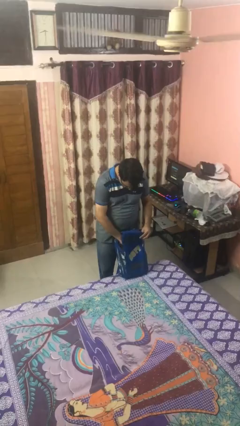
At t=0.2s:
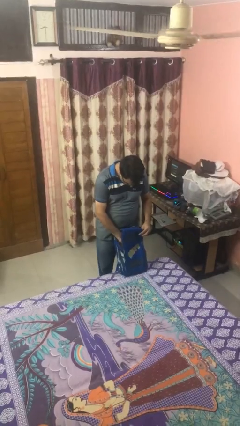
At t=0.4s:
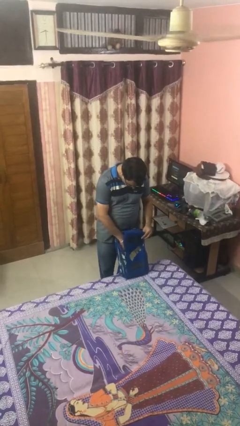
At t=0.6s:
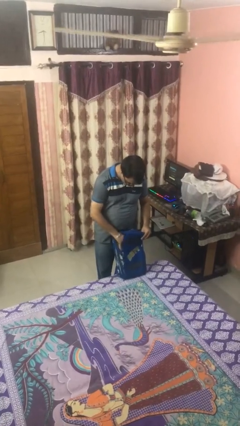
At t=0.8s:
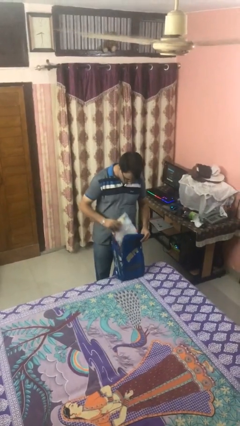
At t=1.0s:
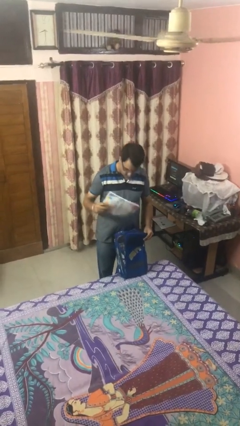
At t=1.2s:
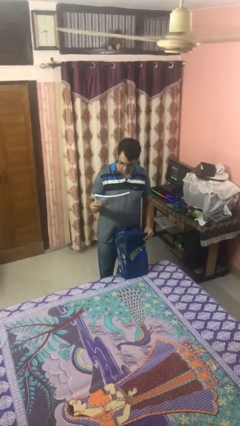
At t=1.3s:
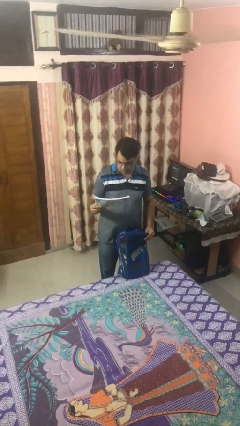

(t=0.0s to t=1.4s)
person takes object from backpack

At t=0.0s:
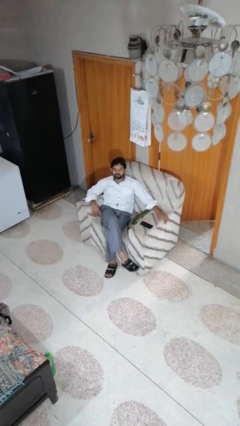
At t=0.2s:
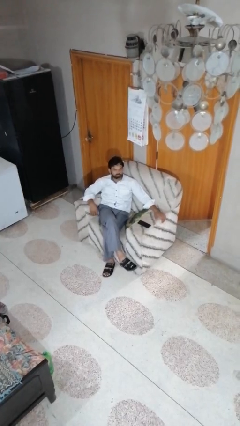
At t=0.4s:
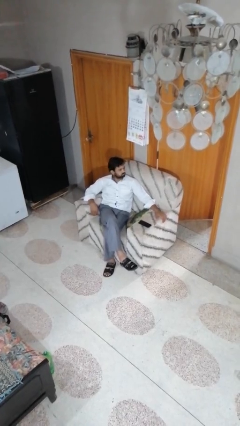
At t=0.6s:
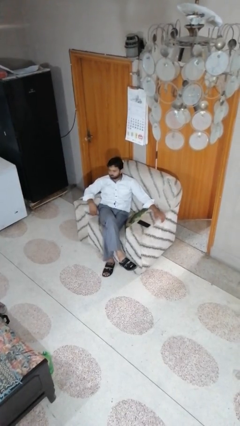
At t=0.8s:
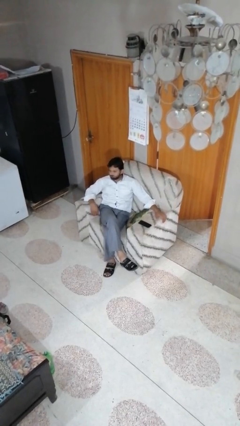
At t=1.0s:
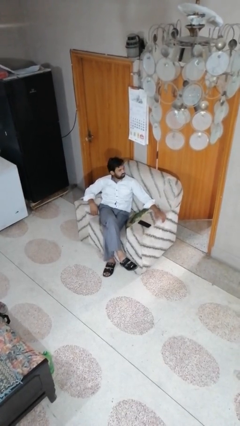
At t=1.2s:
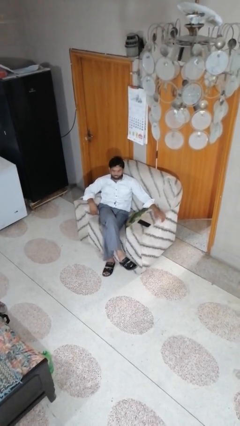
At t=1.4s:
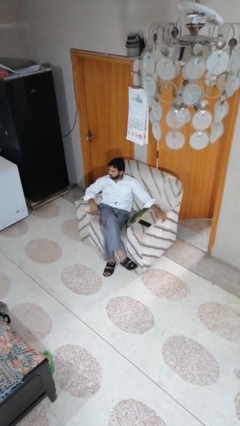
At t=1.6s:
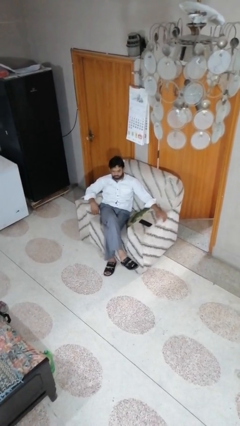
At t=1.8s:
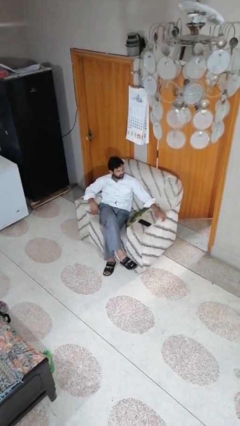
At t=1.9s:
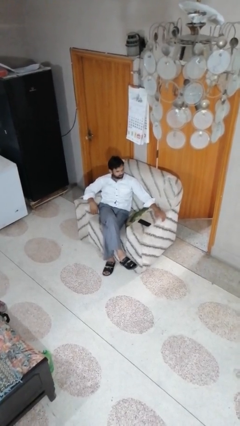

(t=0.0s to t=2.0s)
person shakes head

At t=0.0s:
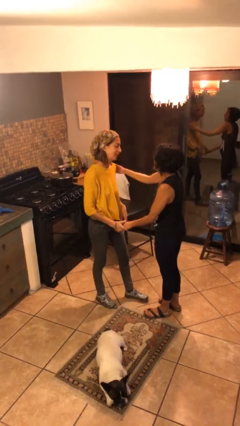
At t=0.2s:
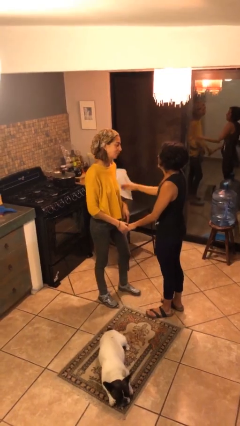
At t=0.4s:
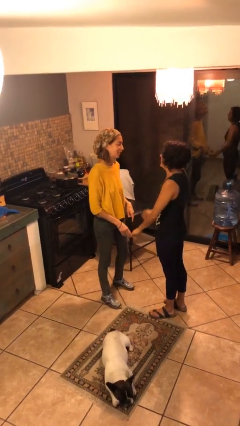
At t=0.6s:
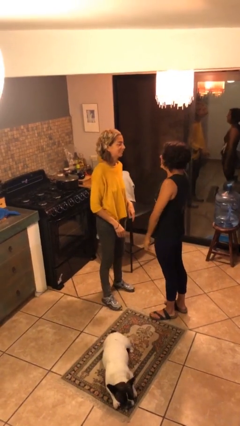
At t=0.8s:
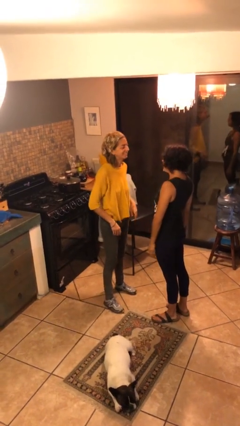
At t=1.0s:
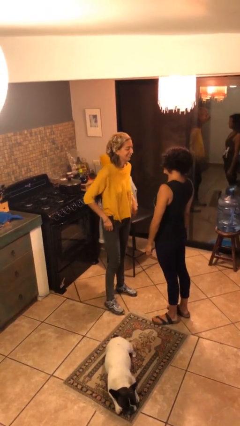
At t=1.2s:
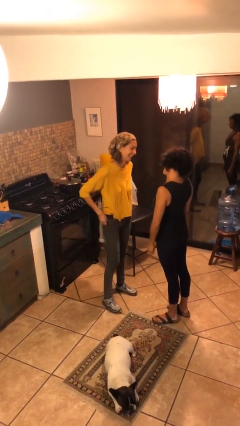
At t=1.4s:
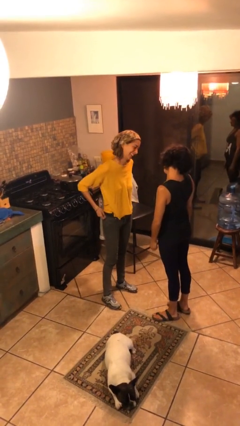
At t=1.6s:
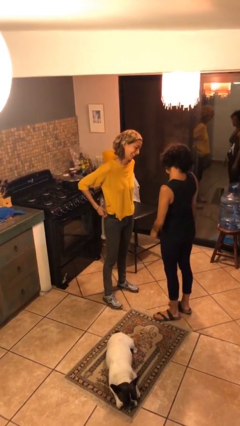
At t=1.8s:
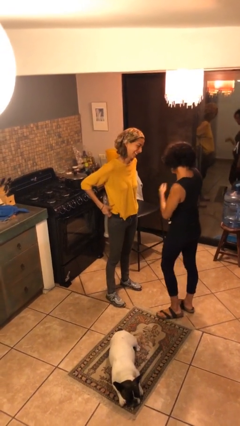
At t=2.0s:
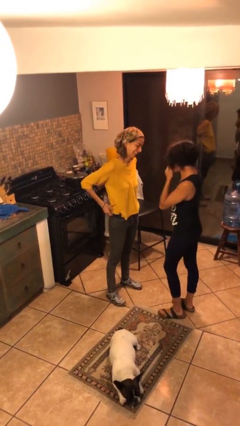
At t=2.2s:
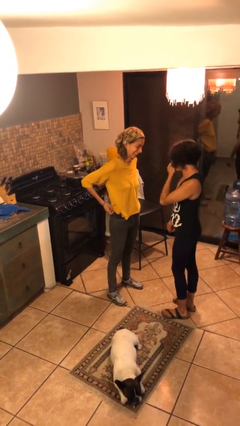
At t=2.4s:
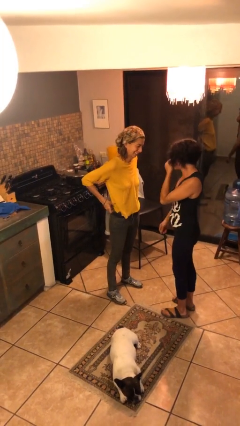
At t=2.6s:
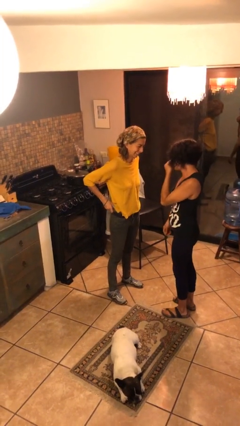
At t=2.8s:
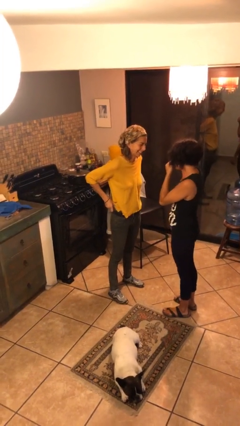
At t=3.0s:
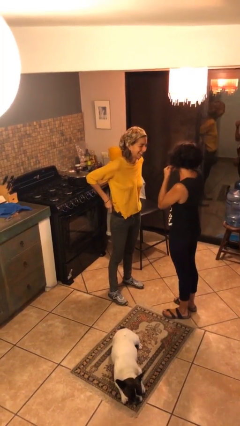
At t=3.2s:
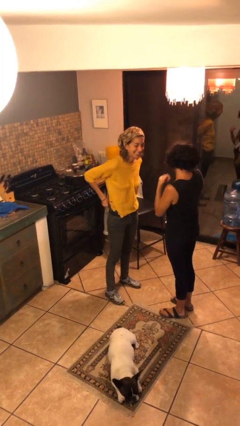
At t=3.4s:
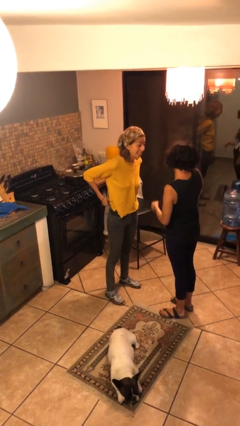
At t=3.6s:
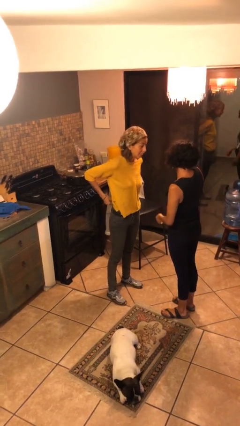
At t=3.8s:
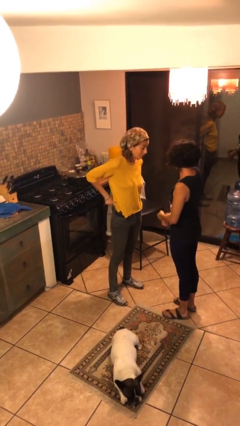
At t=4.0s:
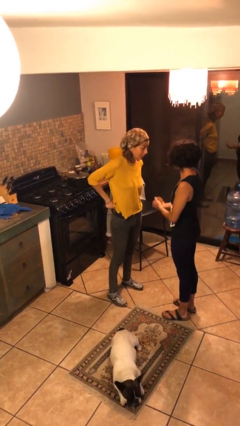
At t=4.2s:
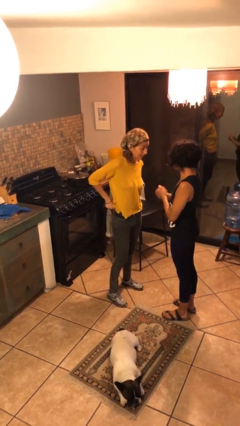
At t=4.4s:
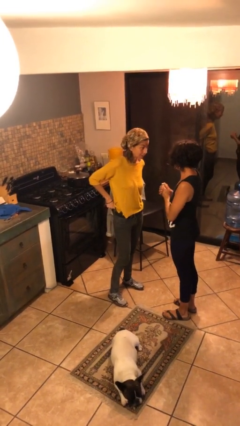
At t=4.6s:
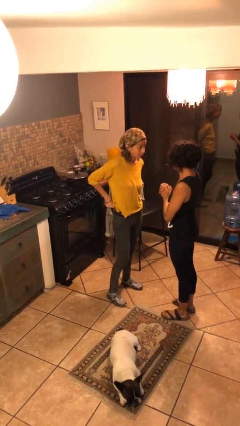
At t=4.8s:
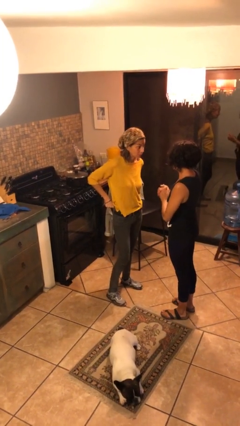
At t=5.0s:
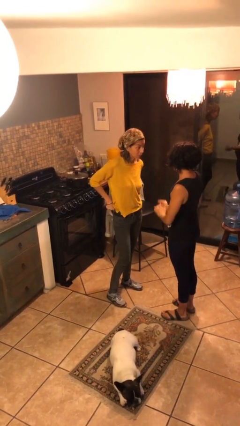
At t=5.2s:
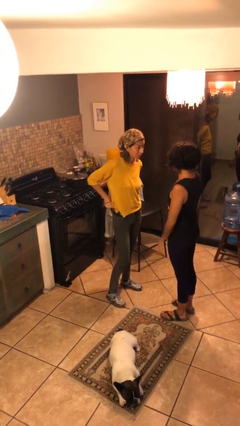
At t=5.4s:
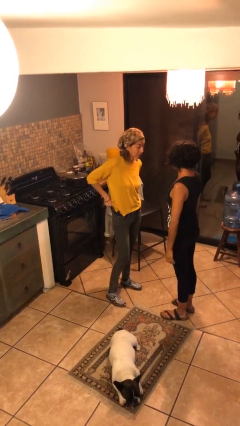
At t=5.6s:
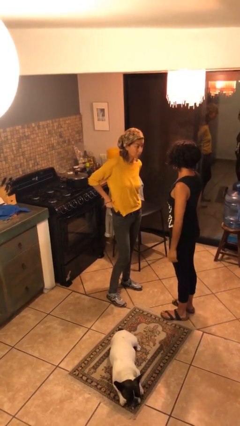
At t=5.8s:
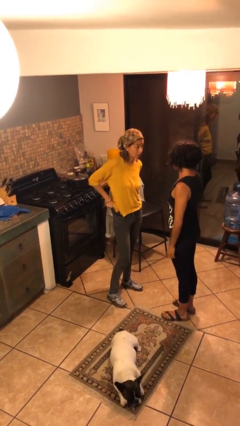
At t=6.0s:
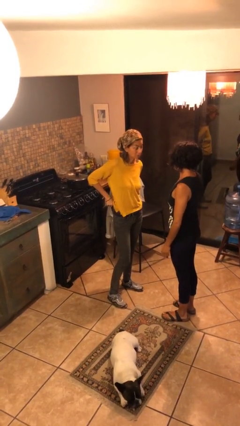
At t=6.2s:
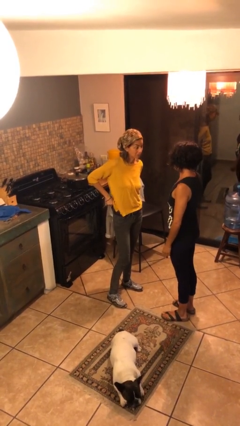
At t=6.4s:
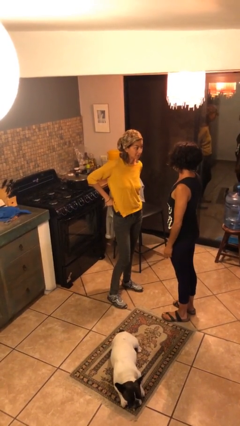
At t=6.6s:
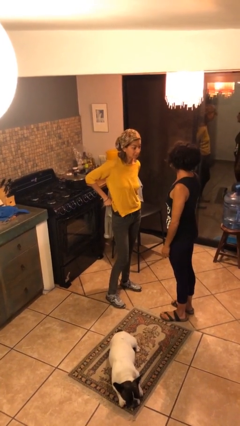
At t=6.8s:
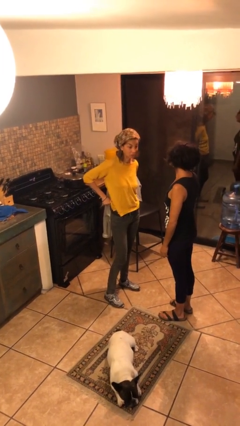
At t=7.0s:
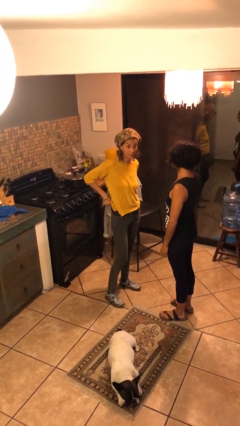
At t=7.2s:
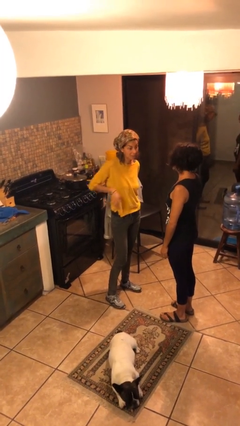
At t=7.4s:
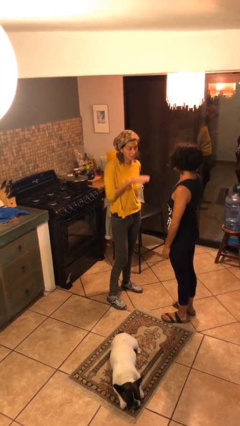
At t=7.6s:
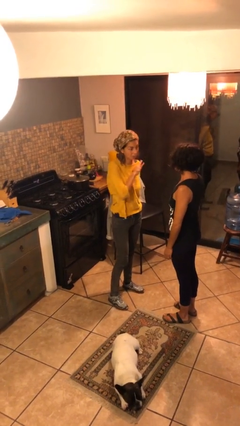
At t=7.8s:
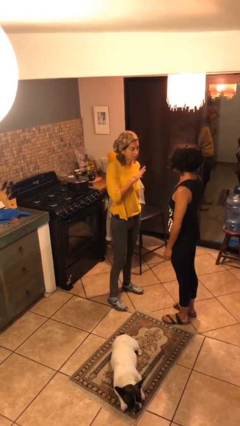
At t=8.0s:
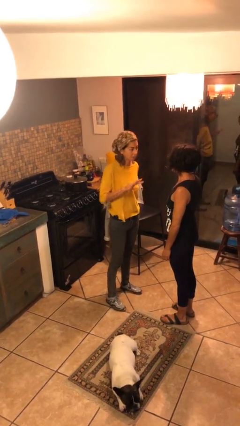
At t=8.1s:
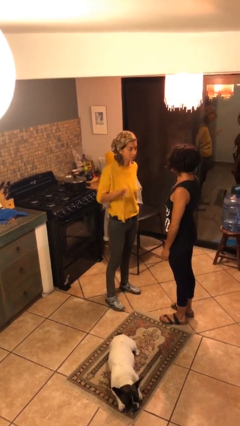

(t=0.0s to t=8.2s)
person talks to person

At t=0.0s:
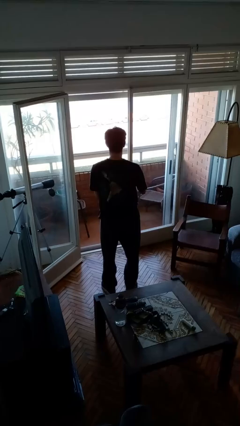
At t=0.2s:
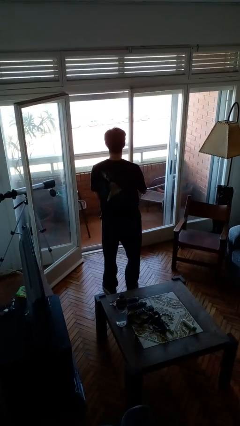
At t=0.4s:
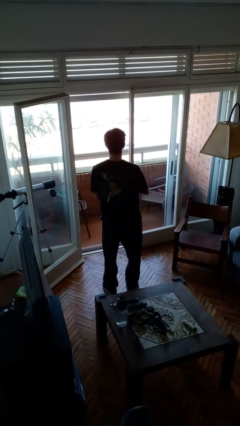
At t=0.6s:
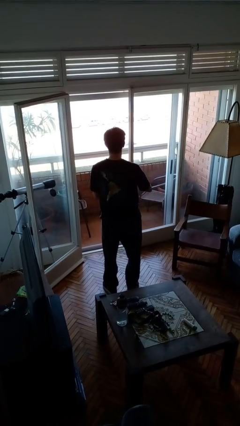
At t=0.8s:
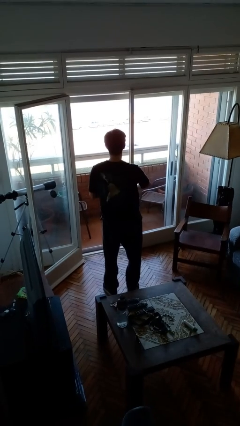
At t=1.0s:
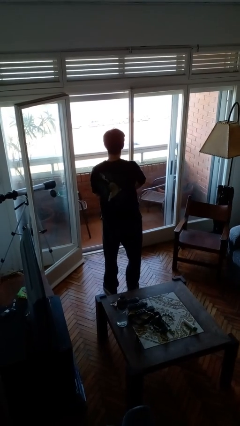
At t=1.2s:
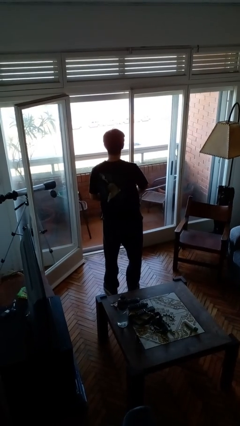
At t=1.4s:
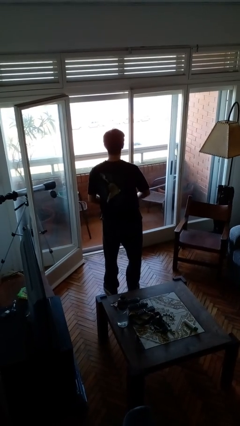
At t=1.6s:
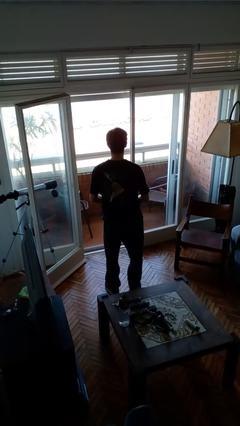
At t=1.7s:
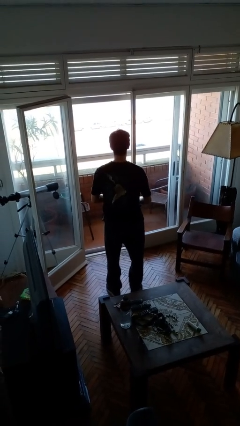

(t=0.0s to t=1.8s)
person takes off wristwatch

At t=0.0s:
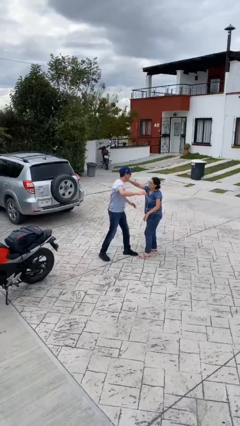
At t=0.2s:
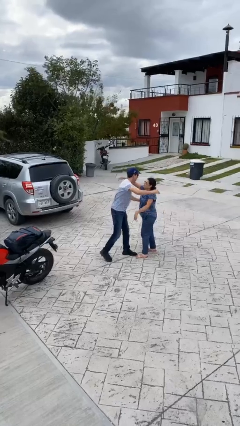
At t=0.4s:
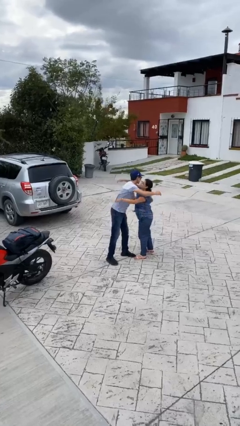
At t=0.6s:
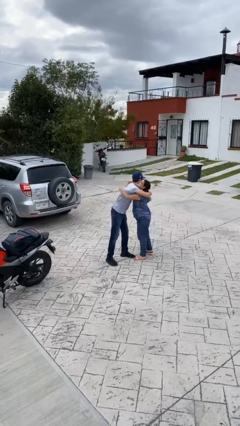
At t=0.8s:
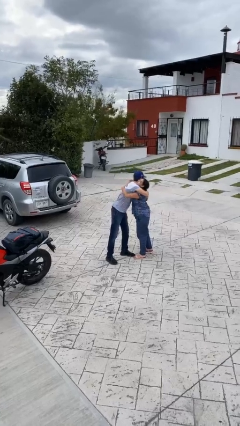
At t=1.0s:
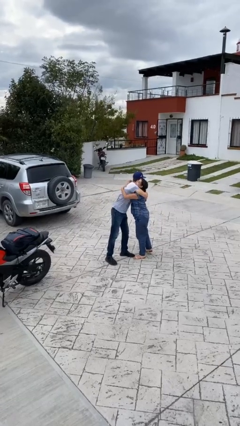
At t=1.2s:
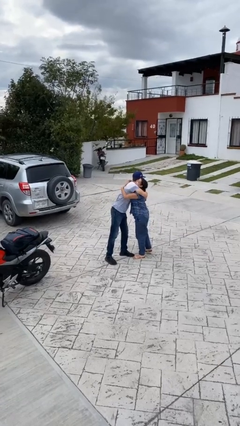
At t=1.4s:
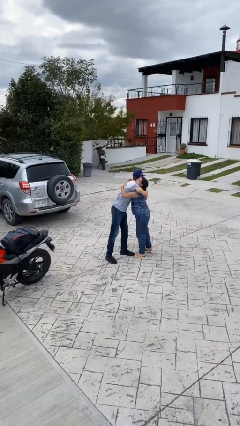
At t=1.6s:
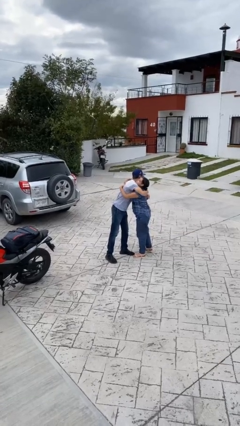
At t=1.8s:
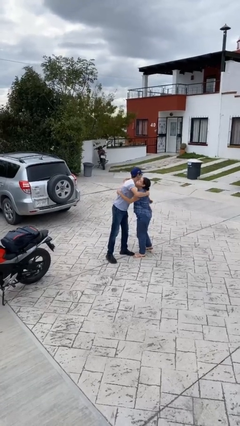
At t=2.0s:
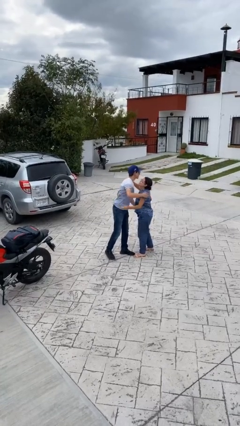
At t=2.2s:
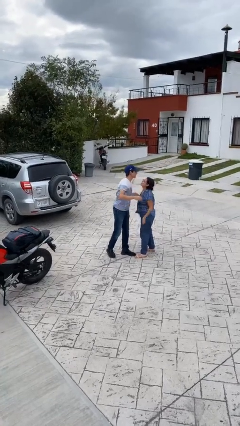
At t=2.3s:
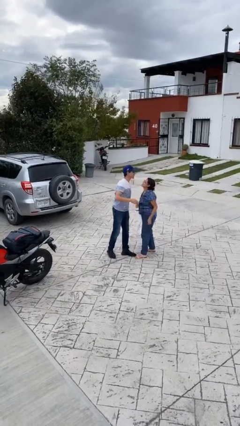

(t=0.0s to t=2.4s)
person embraces person

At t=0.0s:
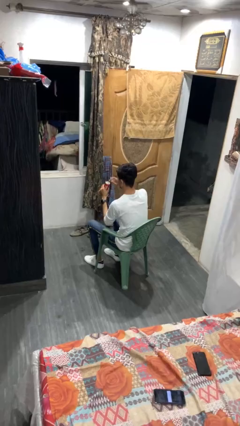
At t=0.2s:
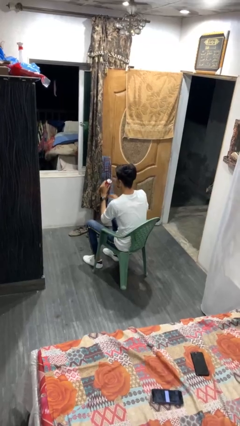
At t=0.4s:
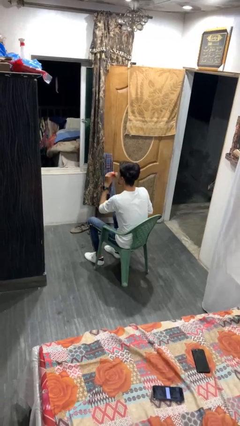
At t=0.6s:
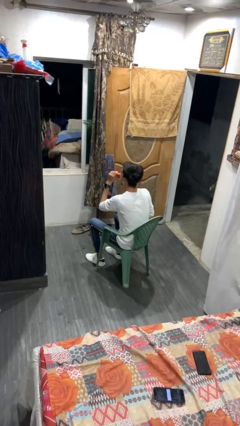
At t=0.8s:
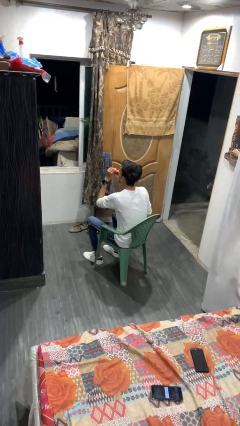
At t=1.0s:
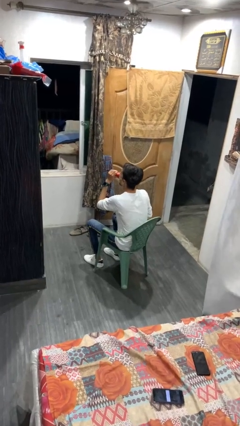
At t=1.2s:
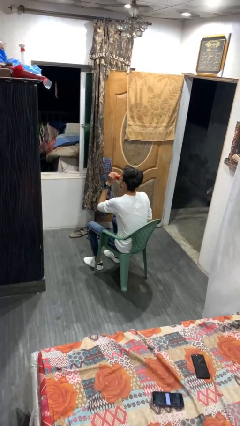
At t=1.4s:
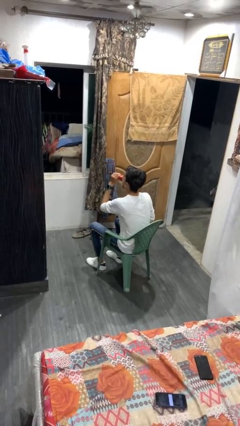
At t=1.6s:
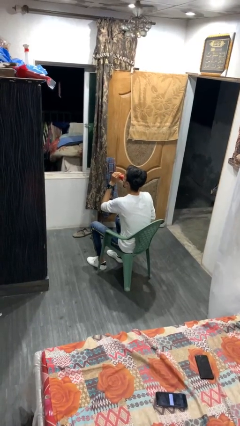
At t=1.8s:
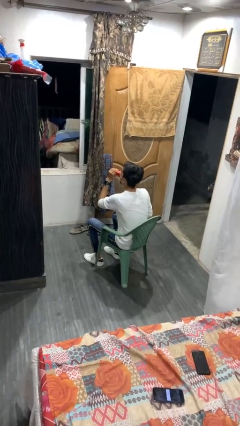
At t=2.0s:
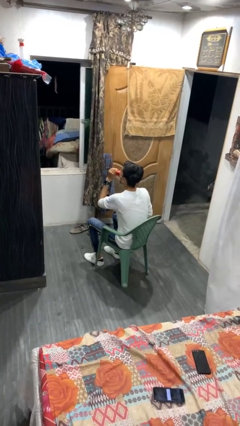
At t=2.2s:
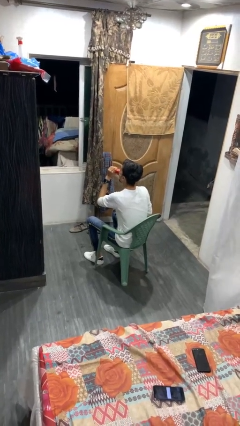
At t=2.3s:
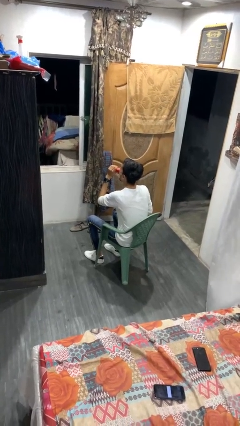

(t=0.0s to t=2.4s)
person drinks from beverage can
